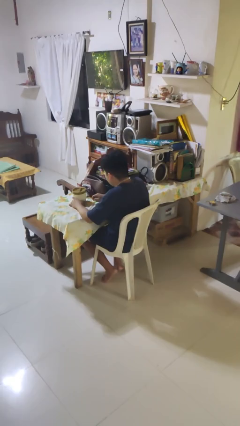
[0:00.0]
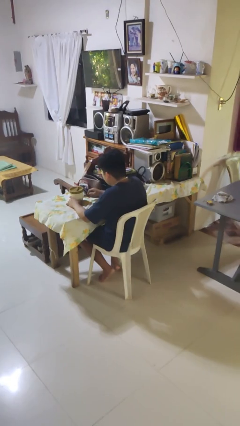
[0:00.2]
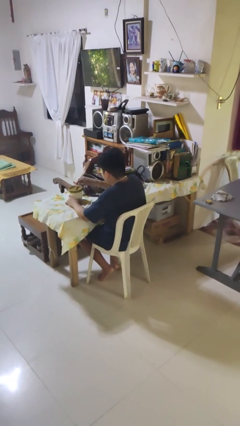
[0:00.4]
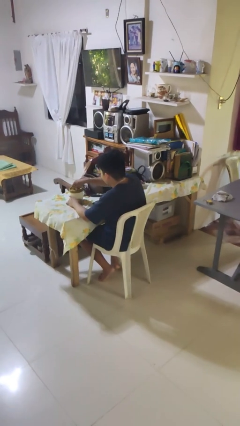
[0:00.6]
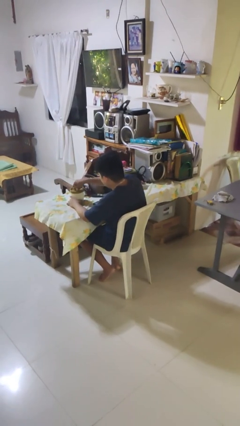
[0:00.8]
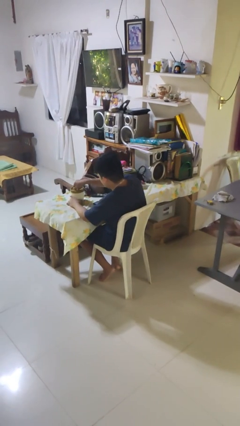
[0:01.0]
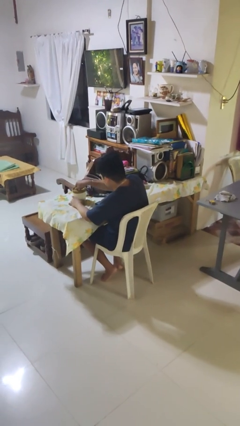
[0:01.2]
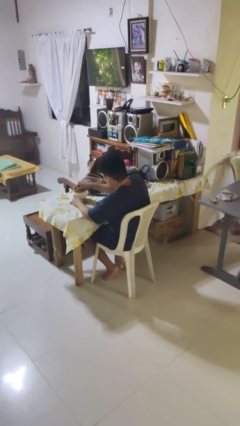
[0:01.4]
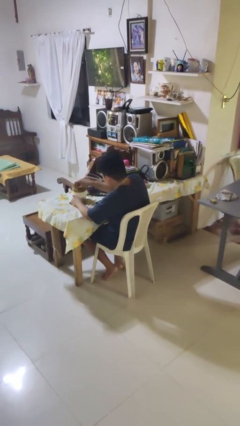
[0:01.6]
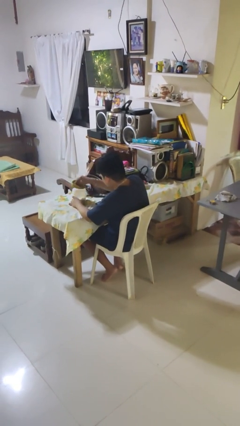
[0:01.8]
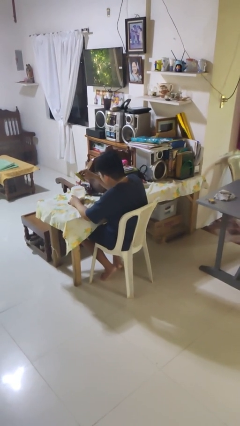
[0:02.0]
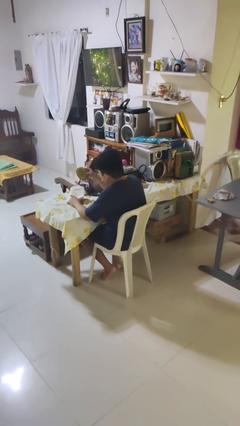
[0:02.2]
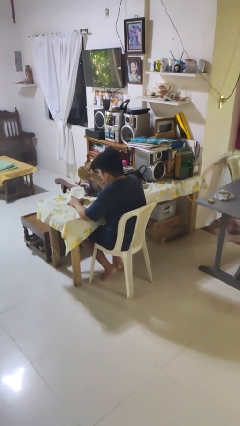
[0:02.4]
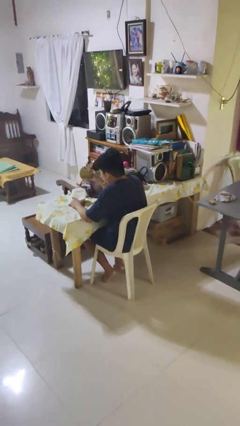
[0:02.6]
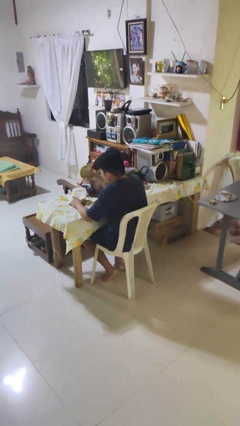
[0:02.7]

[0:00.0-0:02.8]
person opens jar

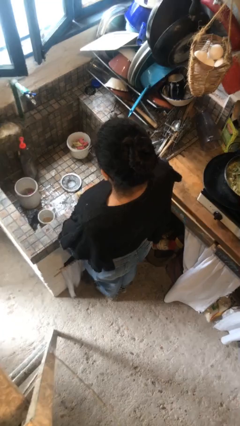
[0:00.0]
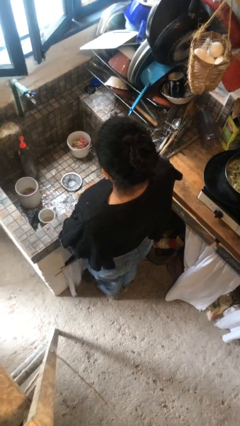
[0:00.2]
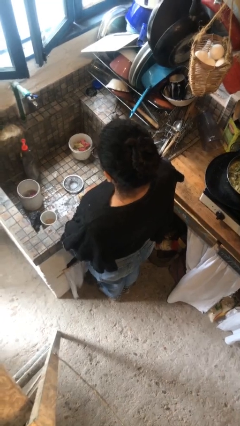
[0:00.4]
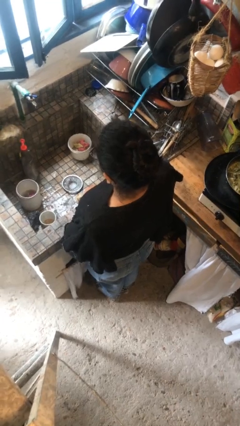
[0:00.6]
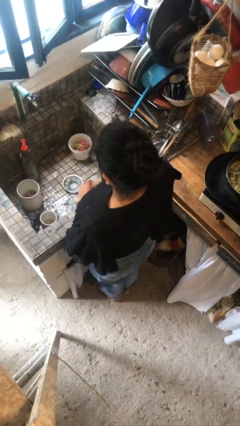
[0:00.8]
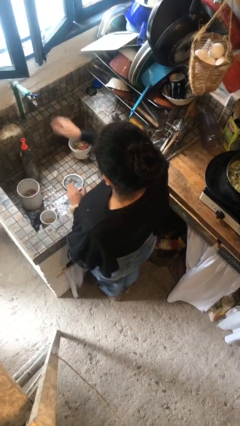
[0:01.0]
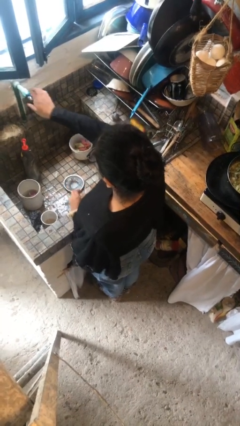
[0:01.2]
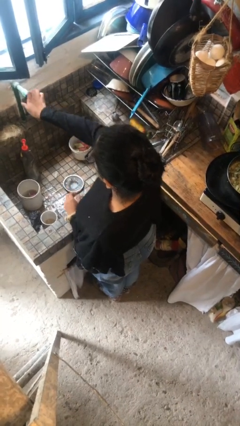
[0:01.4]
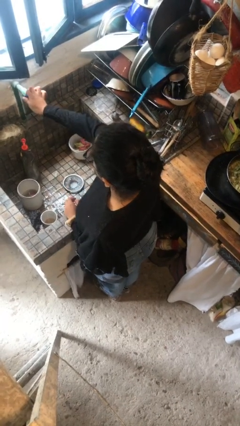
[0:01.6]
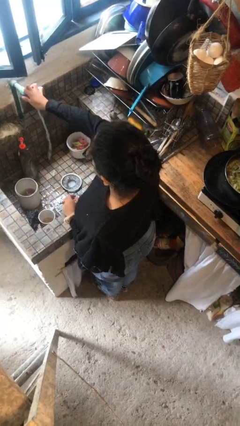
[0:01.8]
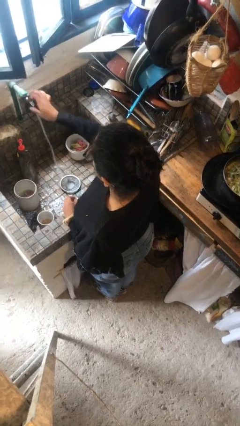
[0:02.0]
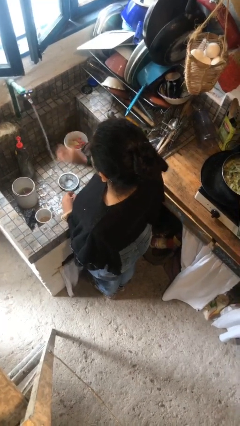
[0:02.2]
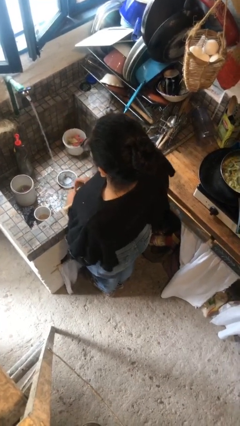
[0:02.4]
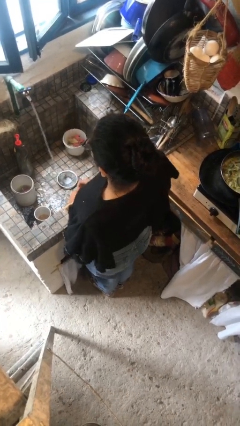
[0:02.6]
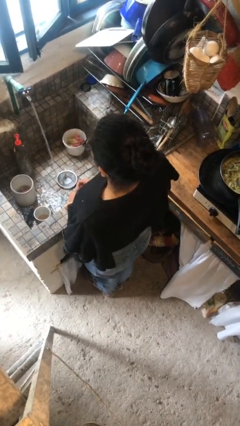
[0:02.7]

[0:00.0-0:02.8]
person turns on faucet

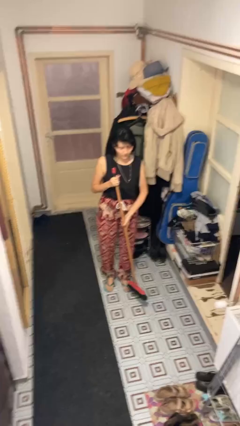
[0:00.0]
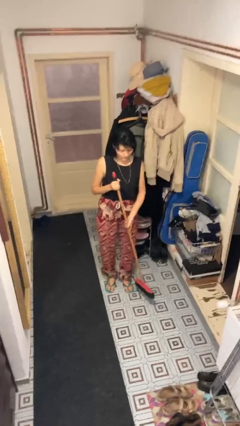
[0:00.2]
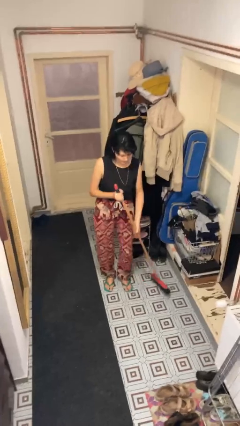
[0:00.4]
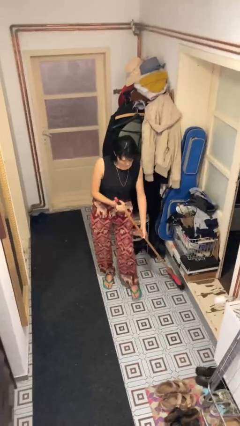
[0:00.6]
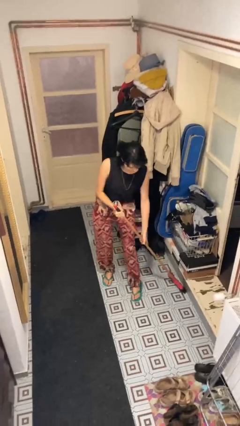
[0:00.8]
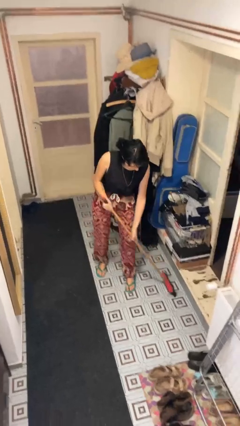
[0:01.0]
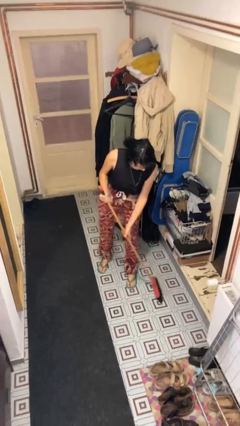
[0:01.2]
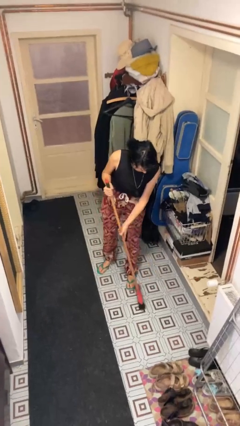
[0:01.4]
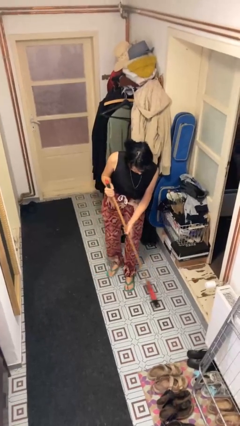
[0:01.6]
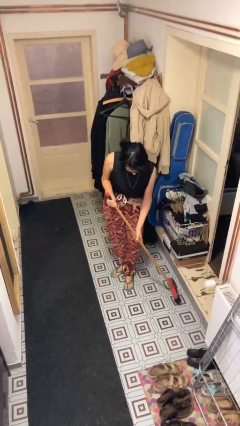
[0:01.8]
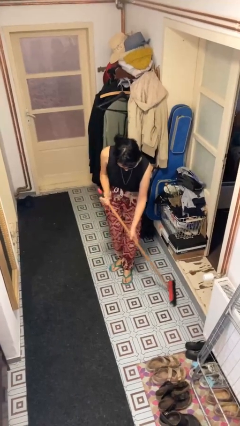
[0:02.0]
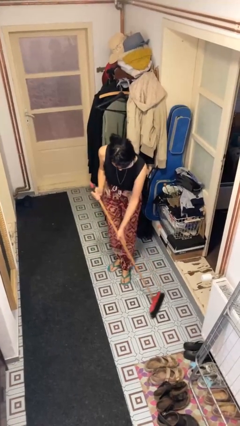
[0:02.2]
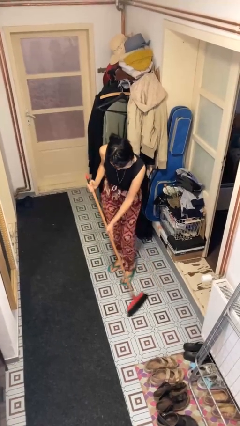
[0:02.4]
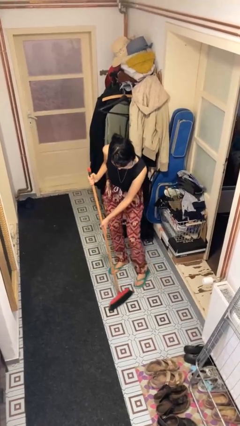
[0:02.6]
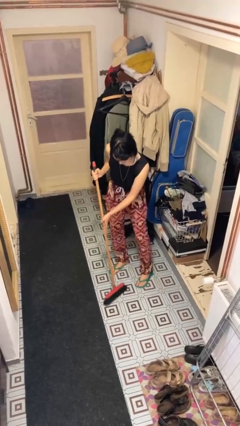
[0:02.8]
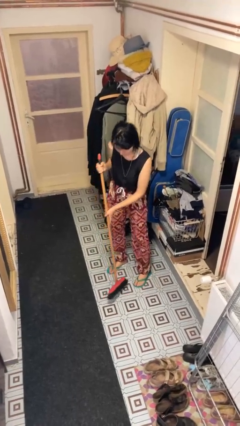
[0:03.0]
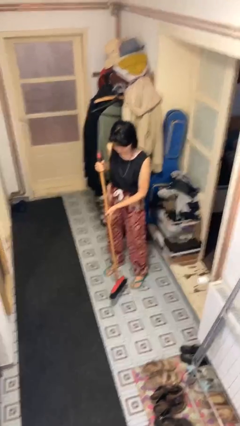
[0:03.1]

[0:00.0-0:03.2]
person sweeps floor

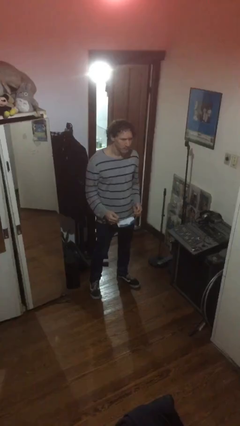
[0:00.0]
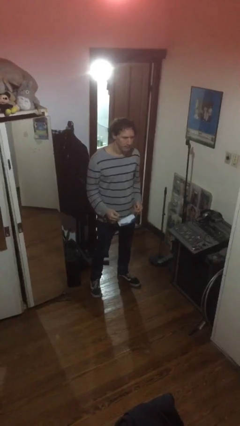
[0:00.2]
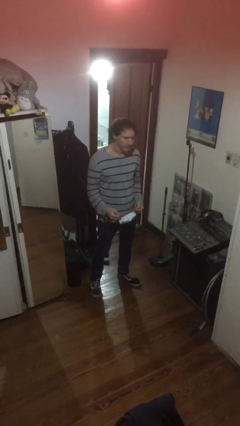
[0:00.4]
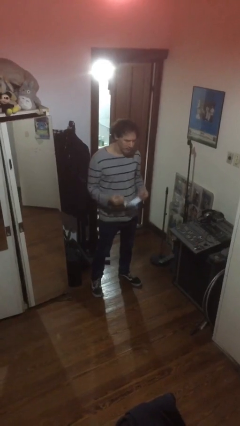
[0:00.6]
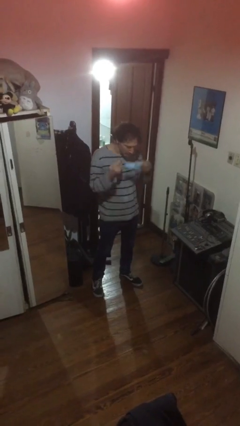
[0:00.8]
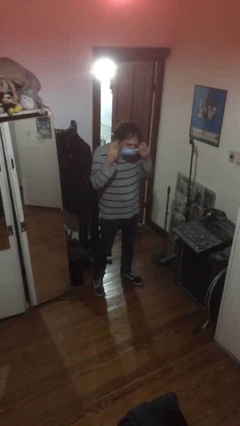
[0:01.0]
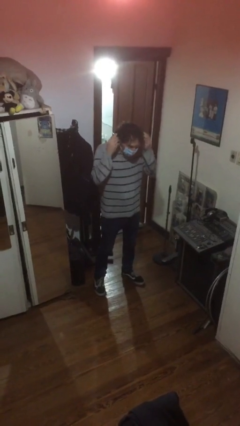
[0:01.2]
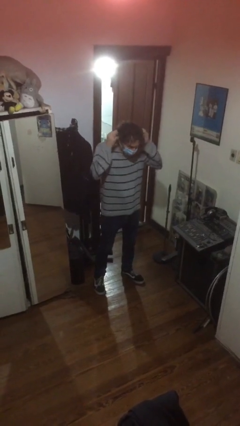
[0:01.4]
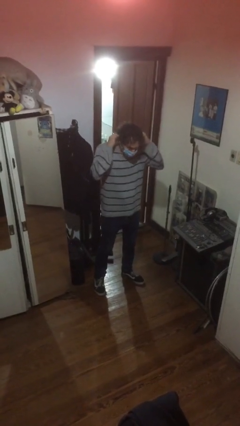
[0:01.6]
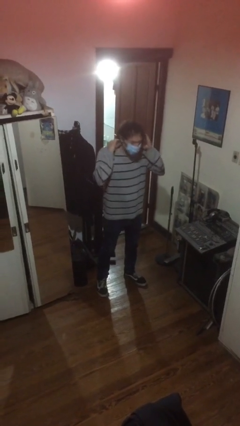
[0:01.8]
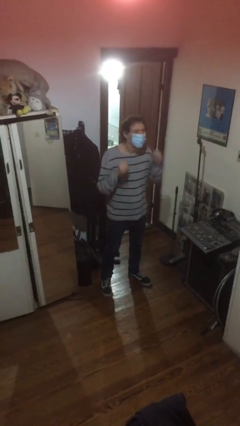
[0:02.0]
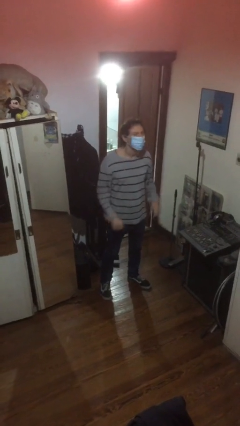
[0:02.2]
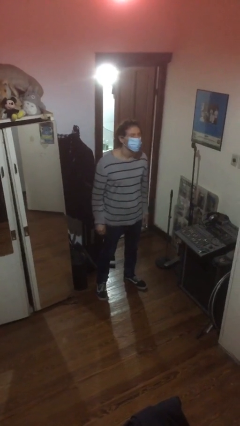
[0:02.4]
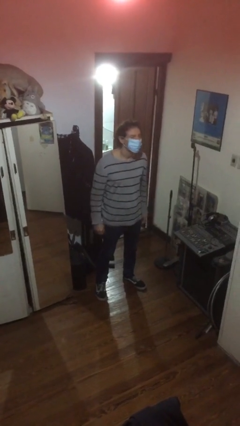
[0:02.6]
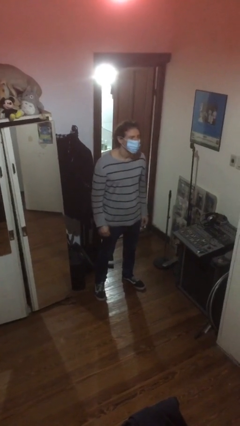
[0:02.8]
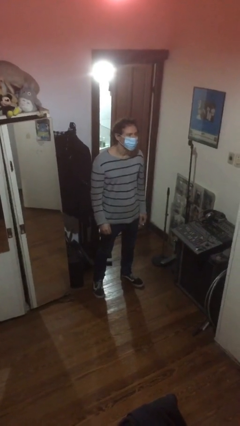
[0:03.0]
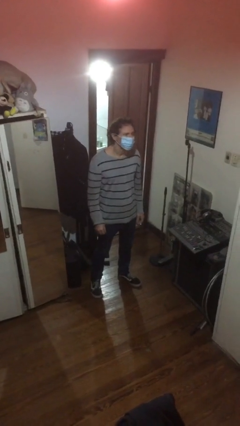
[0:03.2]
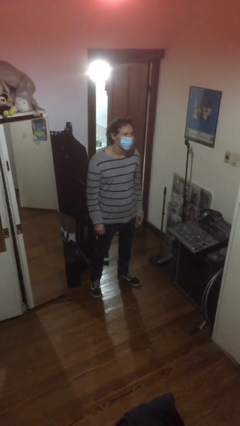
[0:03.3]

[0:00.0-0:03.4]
person puts on facemask

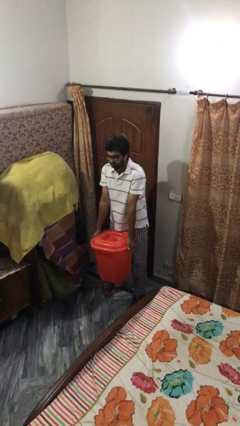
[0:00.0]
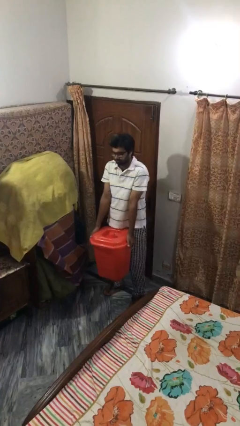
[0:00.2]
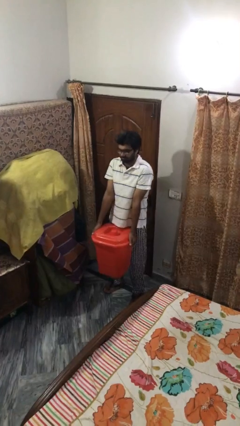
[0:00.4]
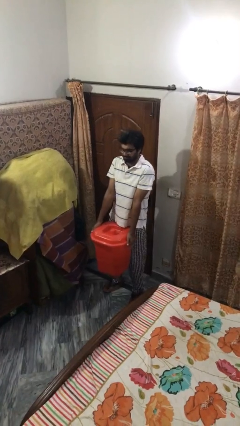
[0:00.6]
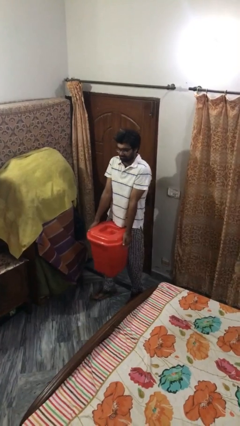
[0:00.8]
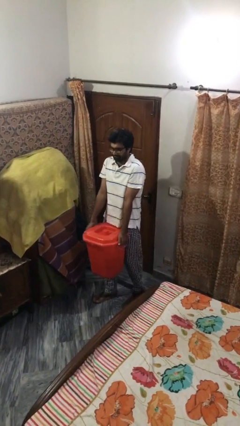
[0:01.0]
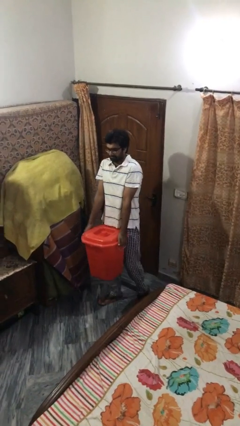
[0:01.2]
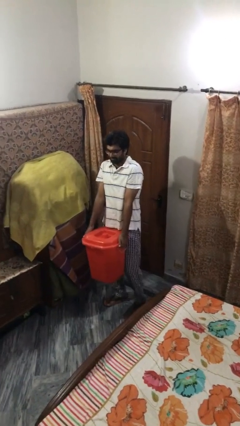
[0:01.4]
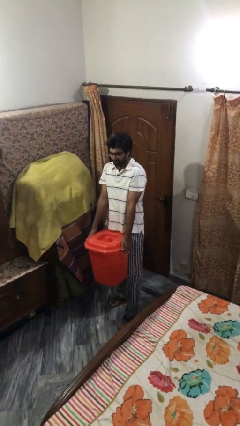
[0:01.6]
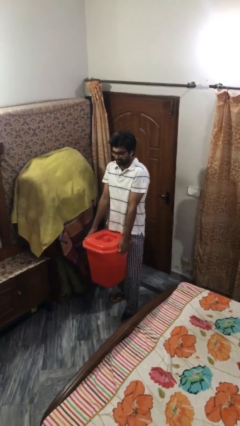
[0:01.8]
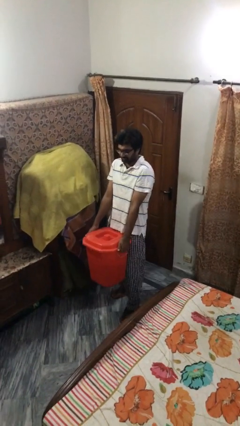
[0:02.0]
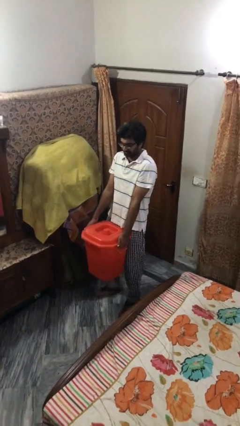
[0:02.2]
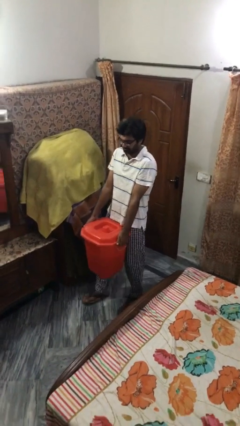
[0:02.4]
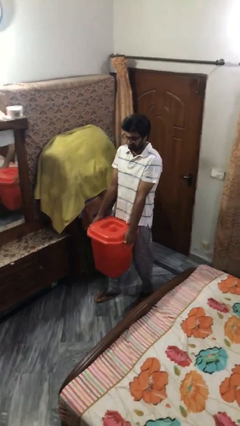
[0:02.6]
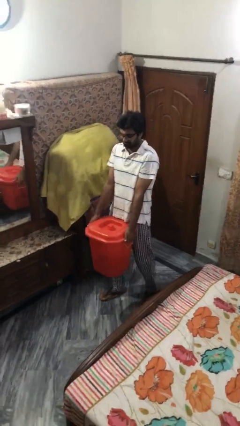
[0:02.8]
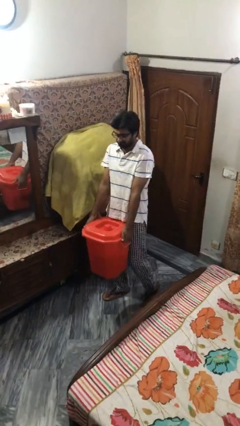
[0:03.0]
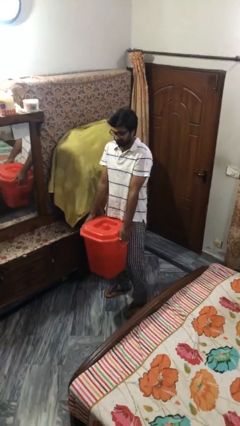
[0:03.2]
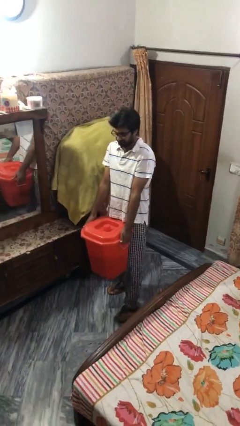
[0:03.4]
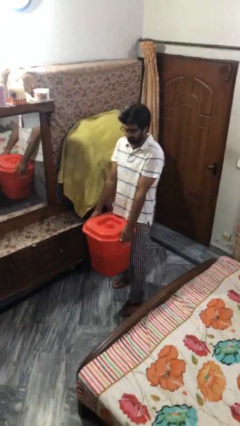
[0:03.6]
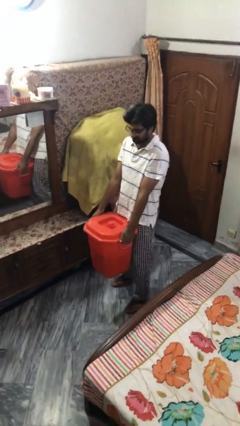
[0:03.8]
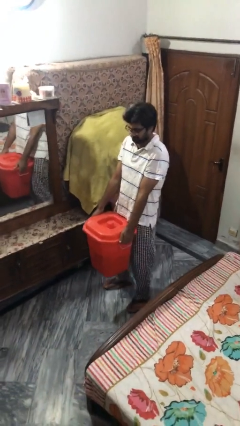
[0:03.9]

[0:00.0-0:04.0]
person carries heavy object

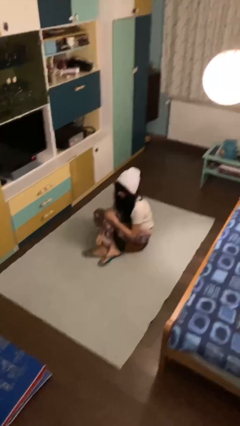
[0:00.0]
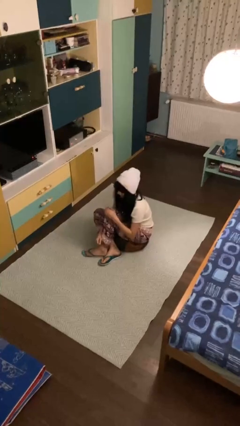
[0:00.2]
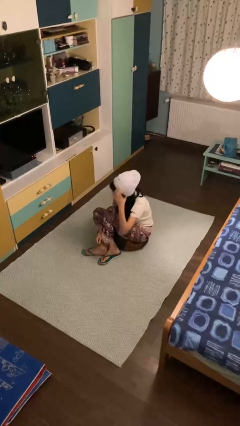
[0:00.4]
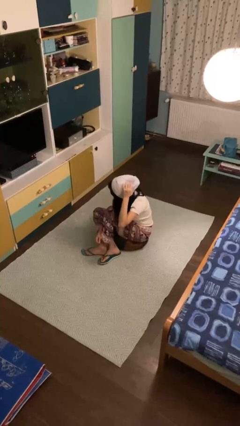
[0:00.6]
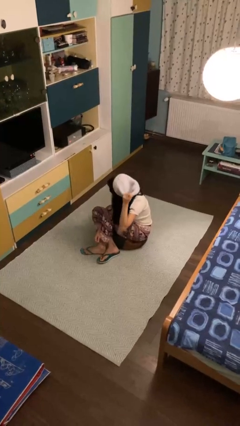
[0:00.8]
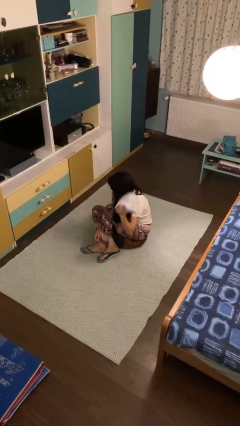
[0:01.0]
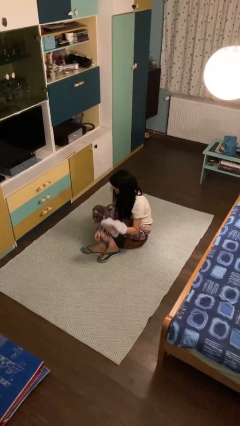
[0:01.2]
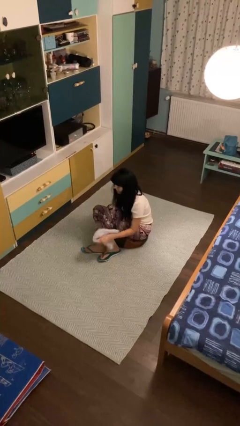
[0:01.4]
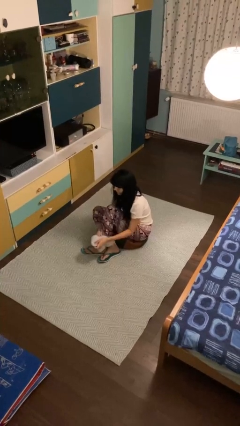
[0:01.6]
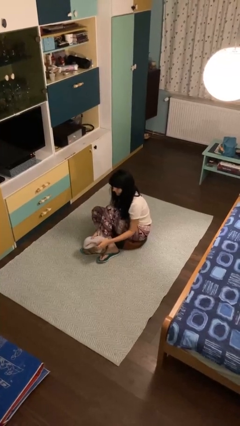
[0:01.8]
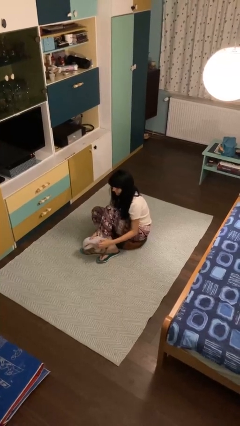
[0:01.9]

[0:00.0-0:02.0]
person takes off hat
